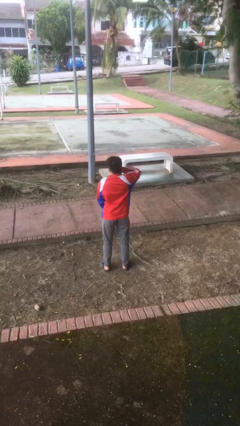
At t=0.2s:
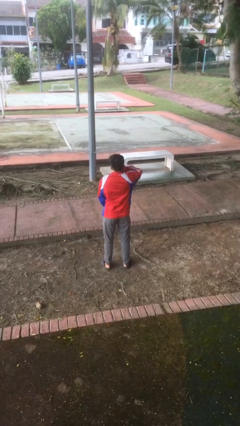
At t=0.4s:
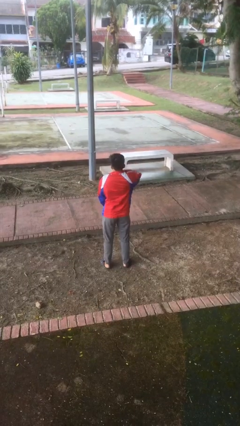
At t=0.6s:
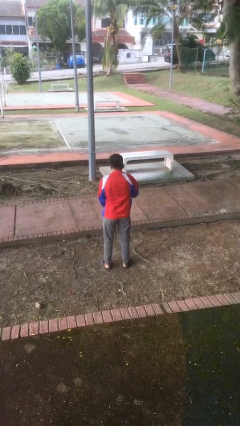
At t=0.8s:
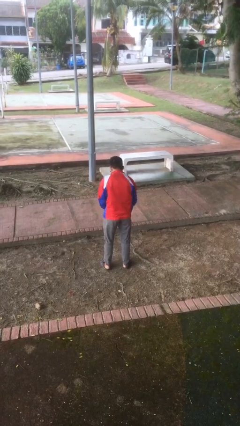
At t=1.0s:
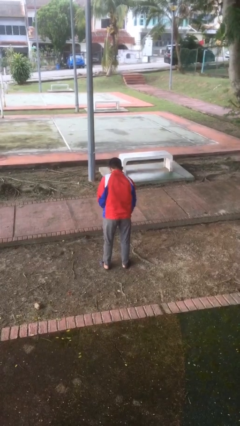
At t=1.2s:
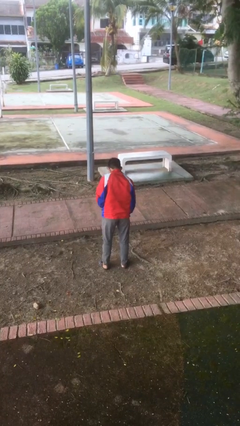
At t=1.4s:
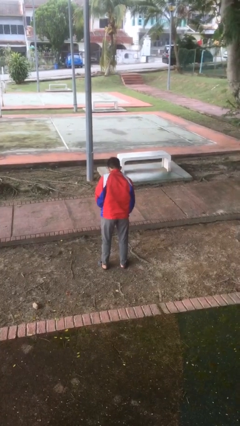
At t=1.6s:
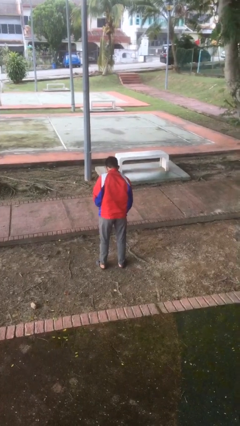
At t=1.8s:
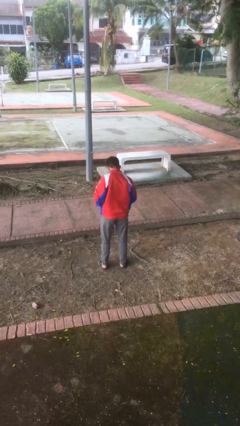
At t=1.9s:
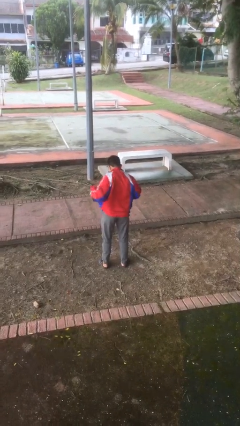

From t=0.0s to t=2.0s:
person unzips jacket

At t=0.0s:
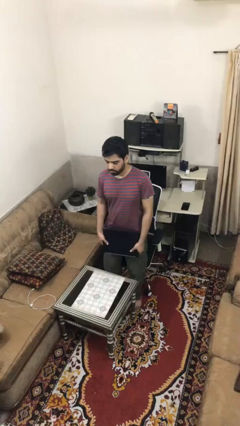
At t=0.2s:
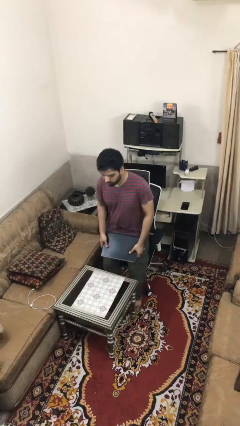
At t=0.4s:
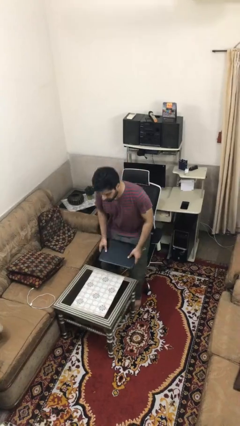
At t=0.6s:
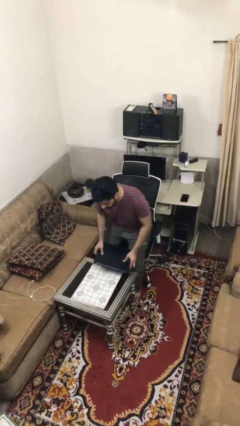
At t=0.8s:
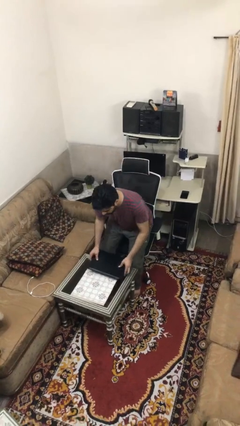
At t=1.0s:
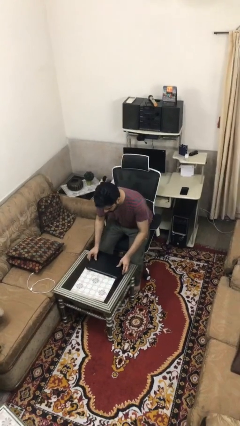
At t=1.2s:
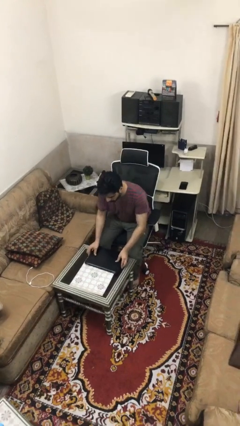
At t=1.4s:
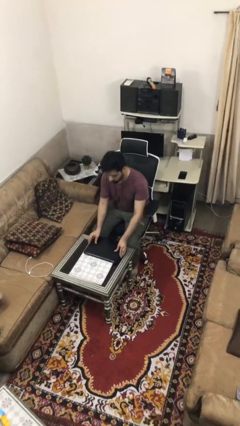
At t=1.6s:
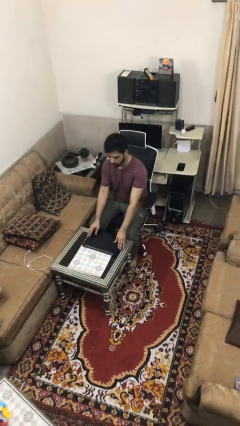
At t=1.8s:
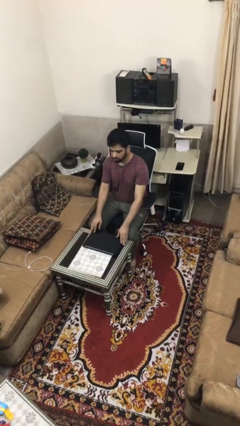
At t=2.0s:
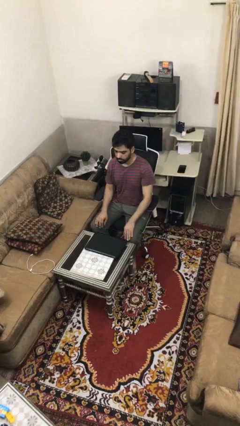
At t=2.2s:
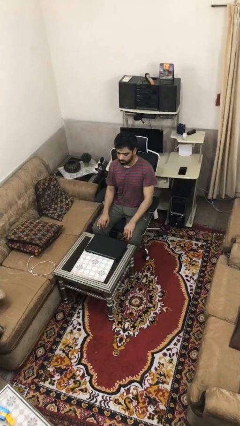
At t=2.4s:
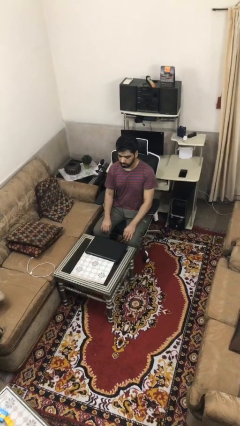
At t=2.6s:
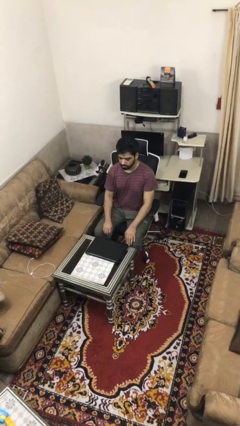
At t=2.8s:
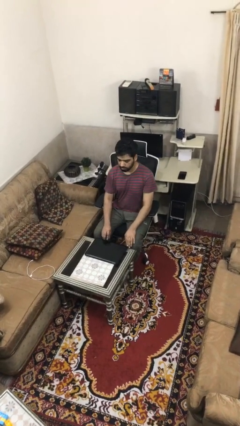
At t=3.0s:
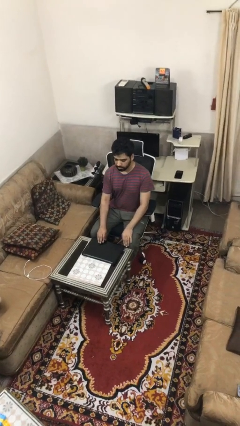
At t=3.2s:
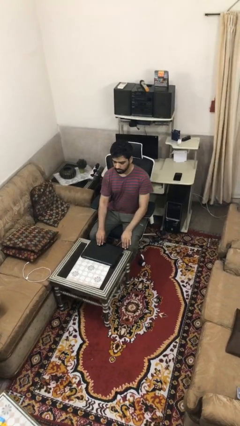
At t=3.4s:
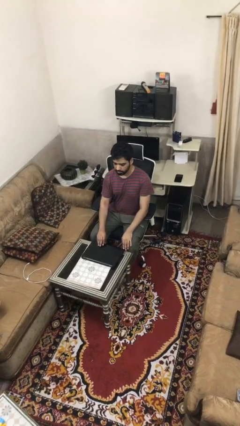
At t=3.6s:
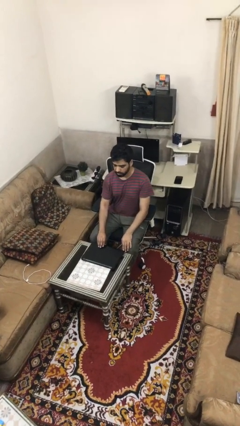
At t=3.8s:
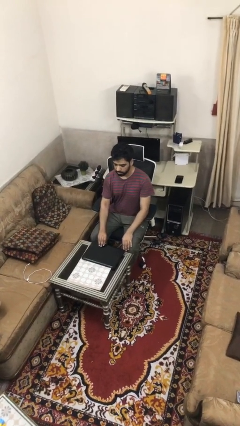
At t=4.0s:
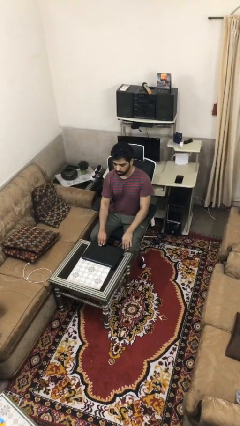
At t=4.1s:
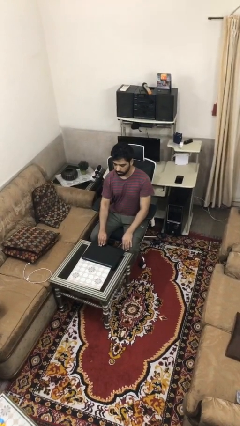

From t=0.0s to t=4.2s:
person sits down

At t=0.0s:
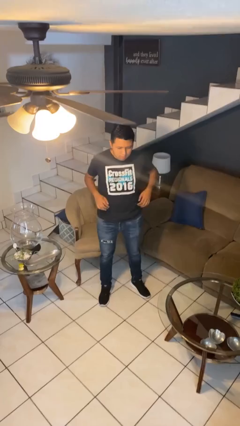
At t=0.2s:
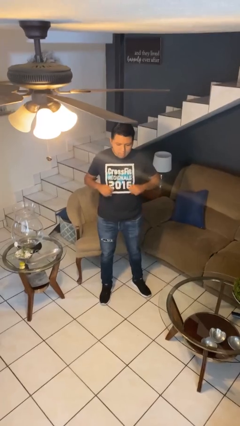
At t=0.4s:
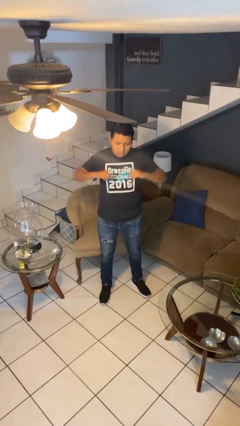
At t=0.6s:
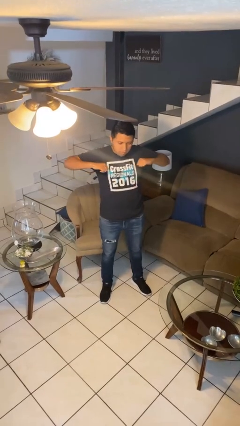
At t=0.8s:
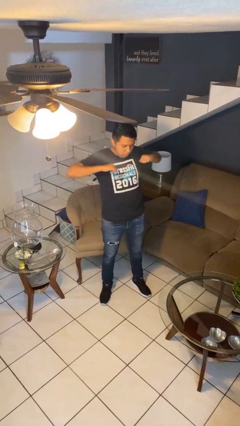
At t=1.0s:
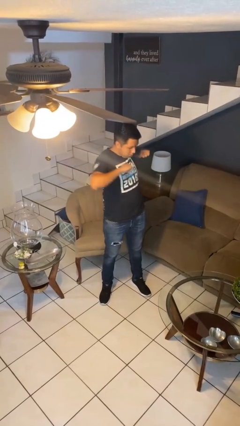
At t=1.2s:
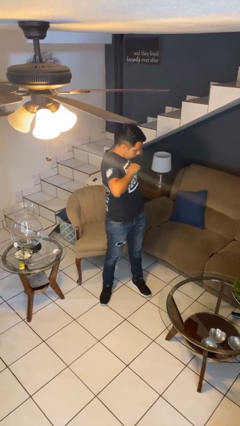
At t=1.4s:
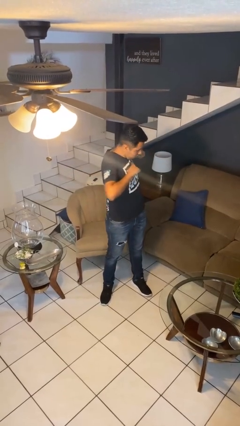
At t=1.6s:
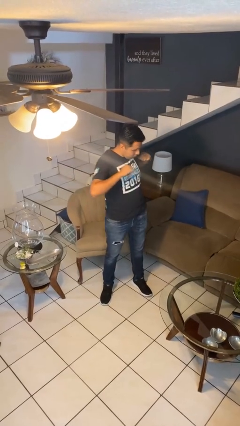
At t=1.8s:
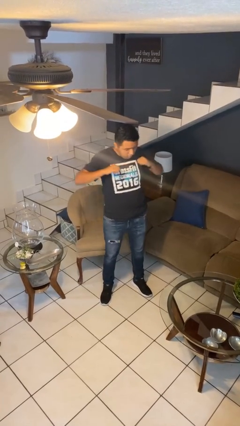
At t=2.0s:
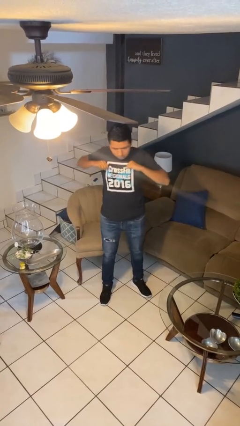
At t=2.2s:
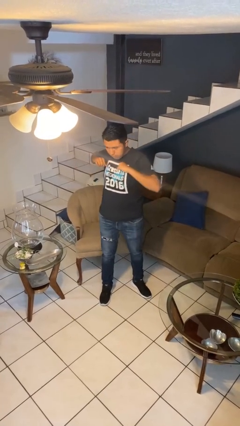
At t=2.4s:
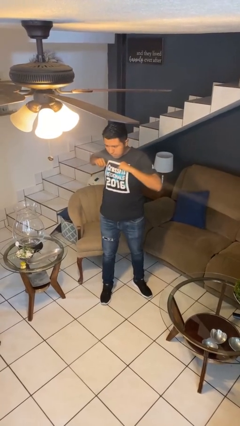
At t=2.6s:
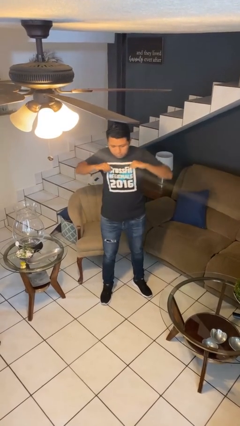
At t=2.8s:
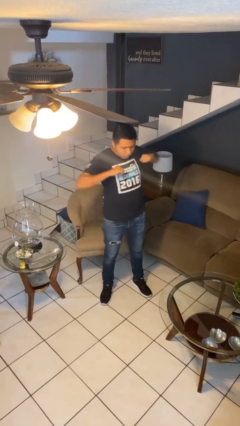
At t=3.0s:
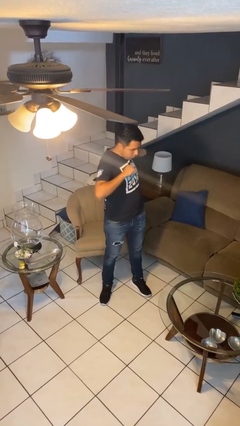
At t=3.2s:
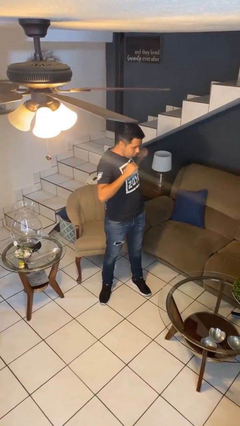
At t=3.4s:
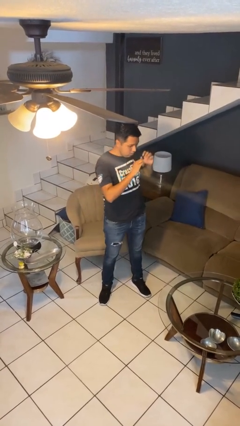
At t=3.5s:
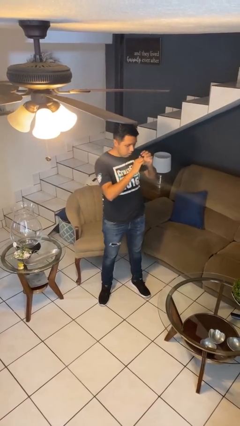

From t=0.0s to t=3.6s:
person stretches arms to side

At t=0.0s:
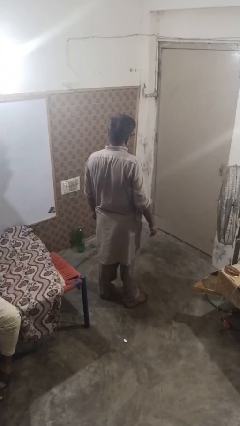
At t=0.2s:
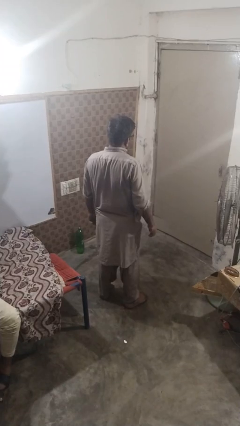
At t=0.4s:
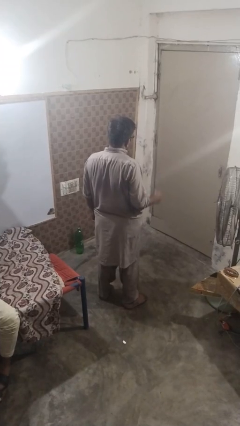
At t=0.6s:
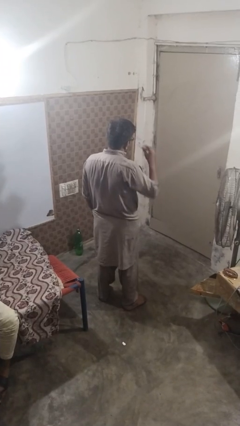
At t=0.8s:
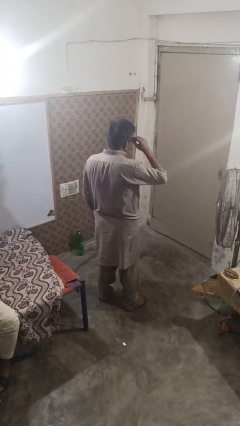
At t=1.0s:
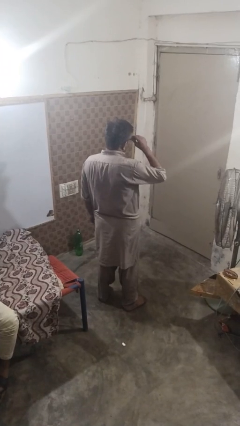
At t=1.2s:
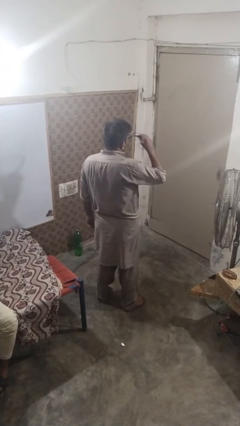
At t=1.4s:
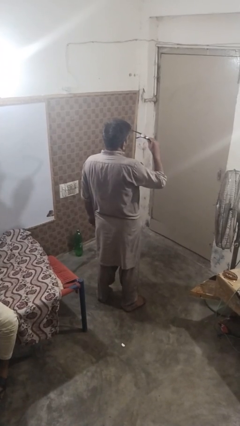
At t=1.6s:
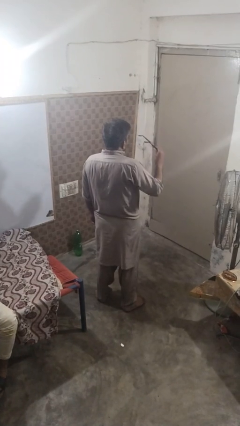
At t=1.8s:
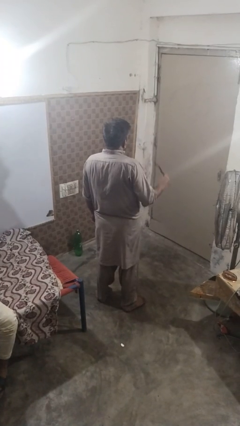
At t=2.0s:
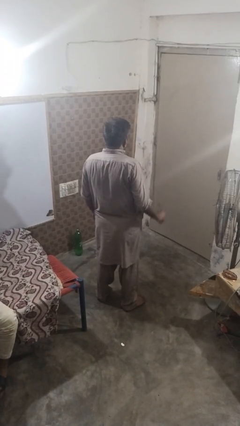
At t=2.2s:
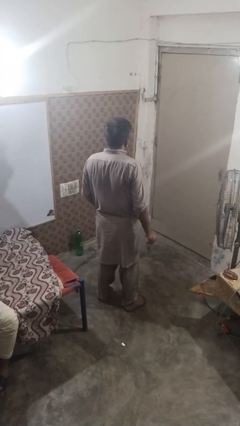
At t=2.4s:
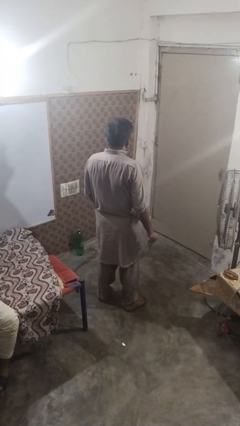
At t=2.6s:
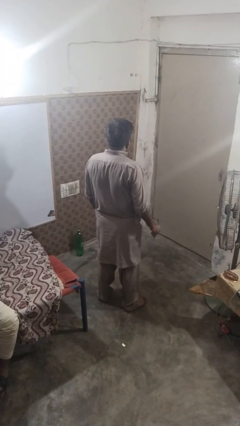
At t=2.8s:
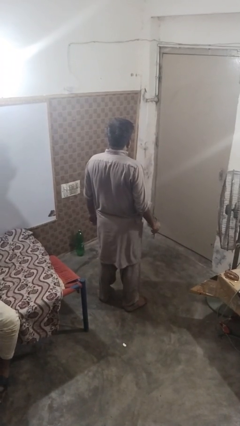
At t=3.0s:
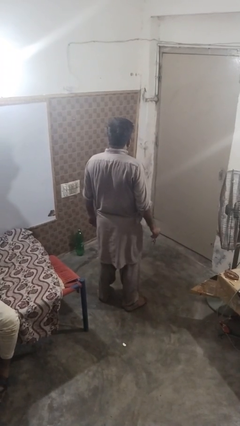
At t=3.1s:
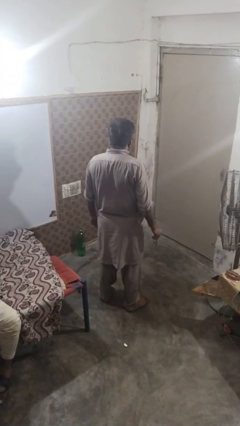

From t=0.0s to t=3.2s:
person takes off glasses

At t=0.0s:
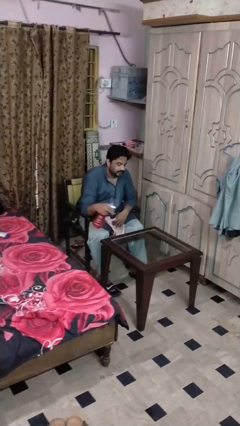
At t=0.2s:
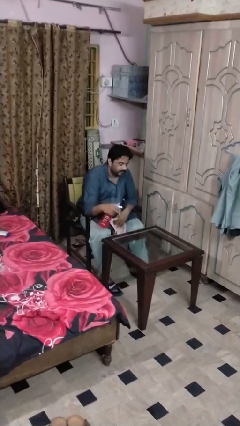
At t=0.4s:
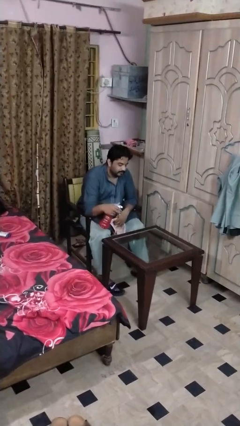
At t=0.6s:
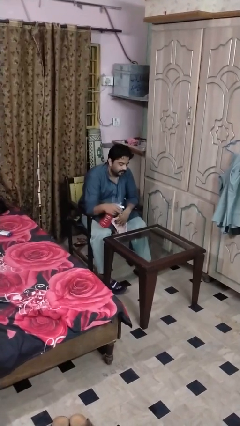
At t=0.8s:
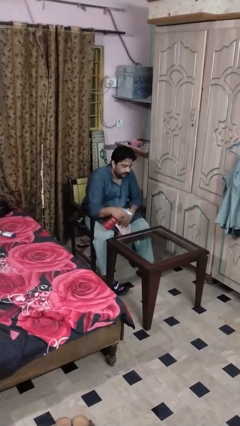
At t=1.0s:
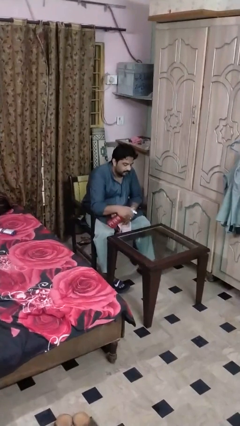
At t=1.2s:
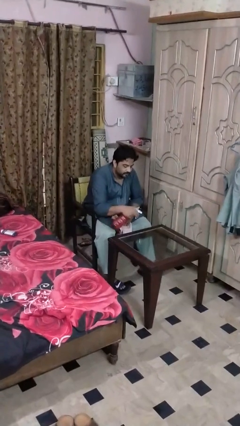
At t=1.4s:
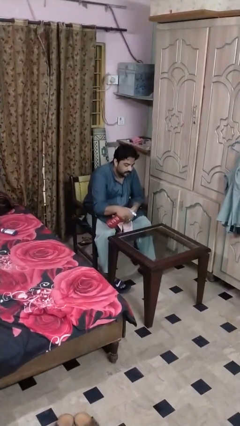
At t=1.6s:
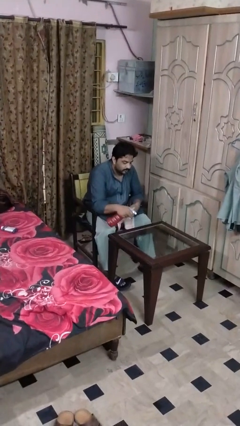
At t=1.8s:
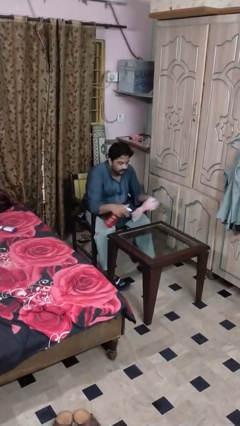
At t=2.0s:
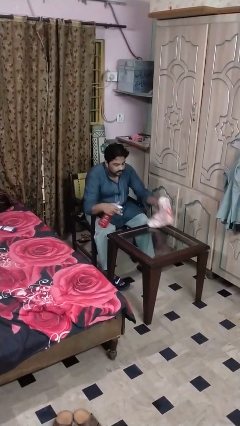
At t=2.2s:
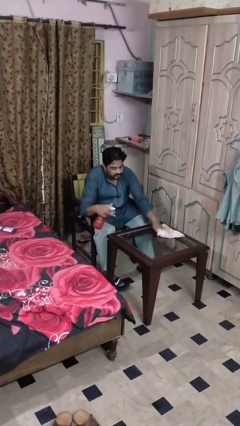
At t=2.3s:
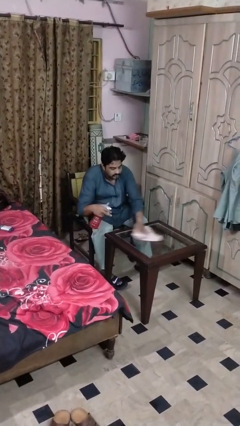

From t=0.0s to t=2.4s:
person sprays from bottle

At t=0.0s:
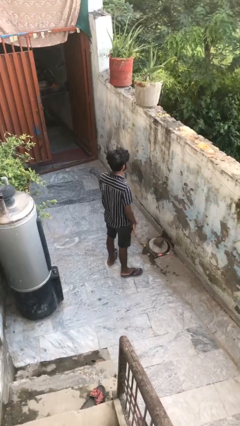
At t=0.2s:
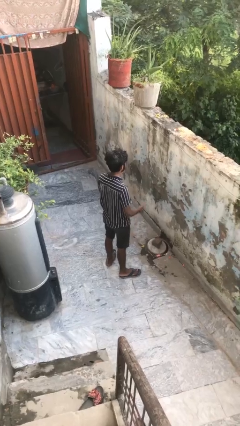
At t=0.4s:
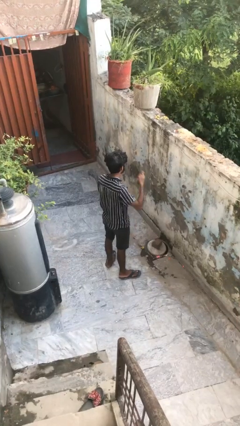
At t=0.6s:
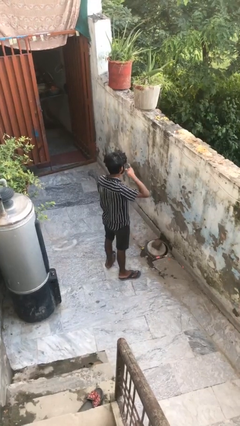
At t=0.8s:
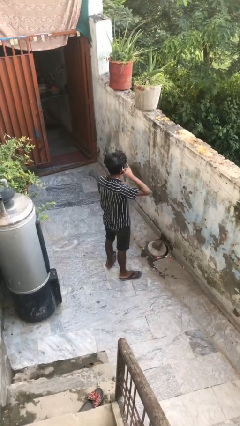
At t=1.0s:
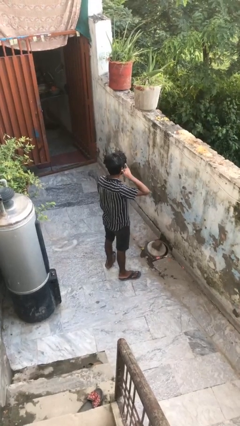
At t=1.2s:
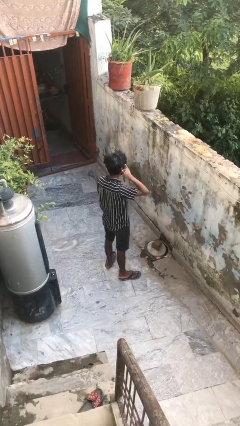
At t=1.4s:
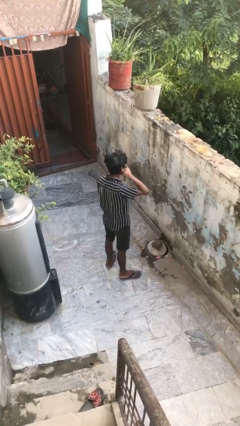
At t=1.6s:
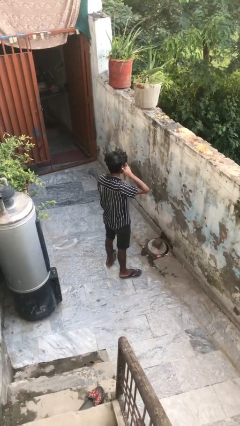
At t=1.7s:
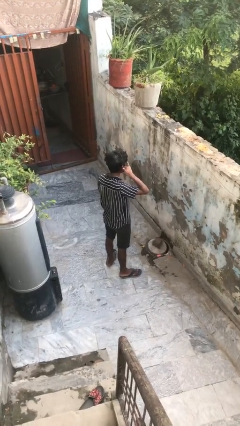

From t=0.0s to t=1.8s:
person gestures call me

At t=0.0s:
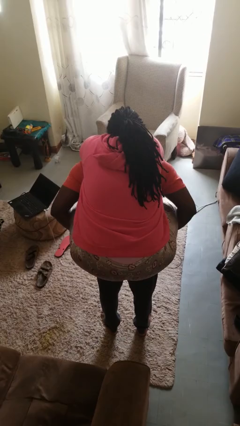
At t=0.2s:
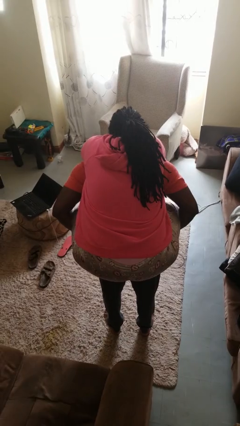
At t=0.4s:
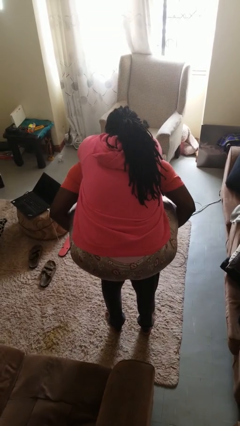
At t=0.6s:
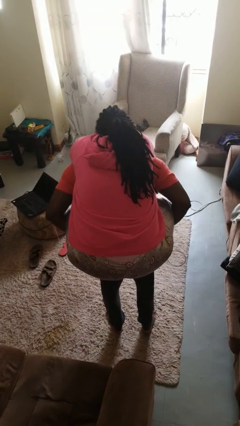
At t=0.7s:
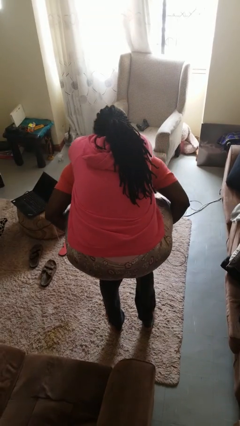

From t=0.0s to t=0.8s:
person carries person on back
